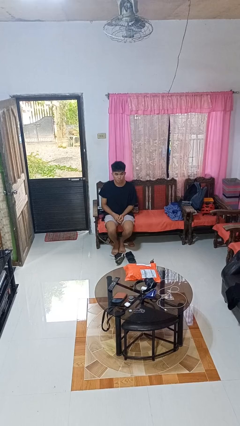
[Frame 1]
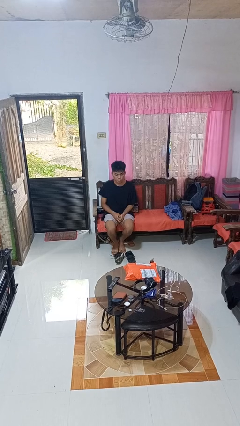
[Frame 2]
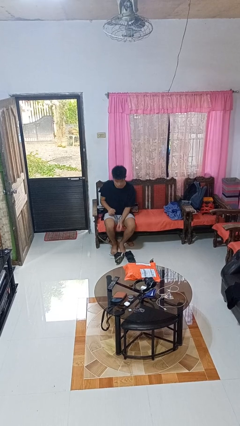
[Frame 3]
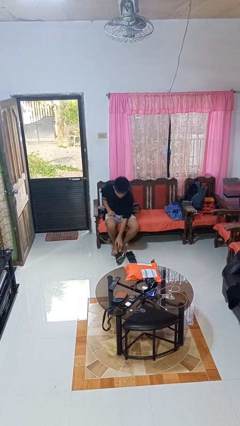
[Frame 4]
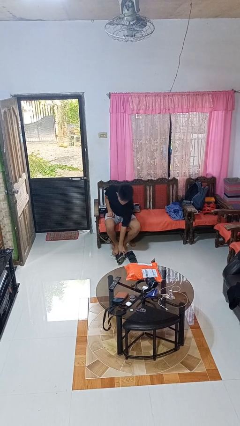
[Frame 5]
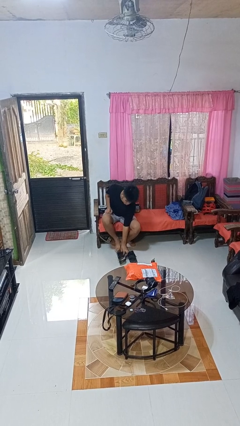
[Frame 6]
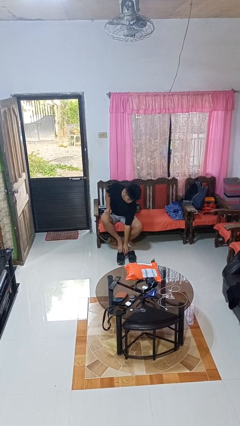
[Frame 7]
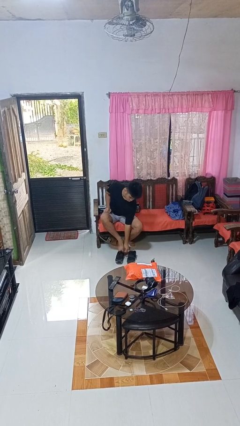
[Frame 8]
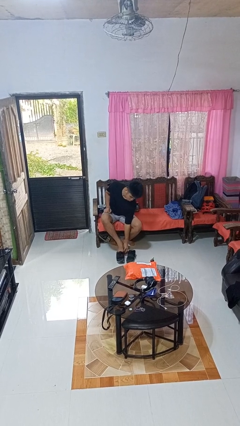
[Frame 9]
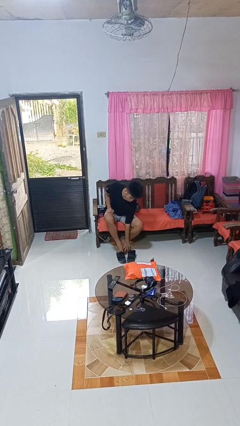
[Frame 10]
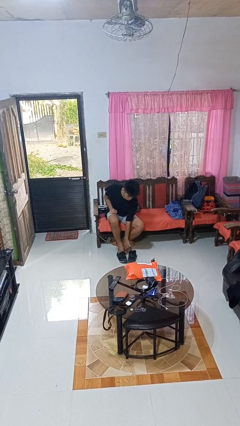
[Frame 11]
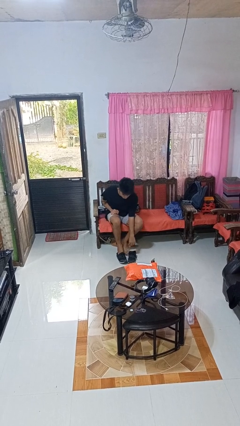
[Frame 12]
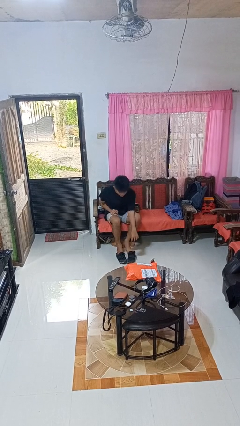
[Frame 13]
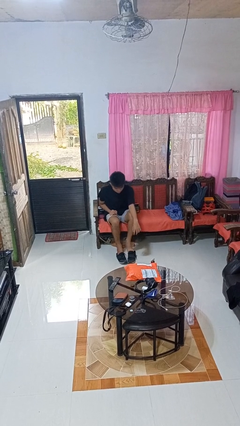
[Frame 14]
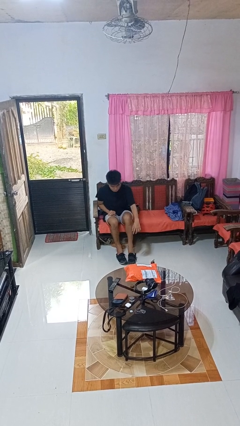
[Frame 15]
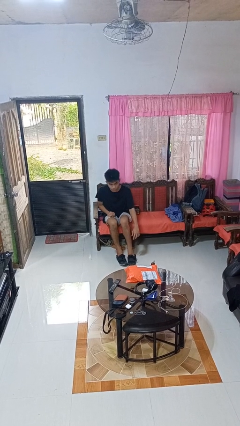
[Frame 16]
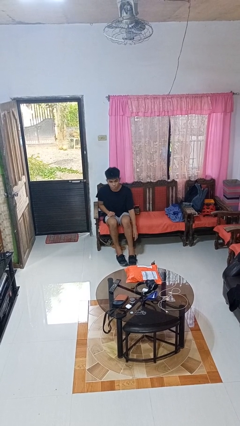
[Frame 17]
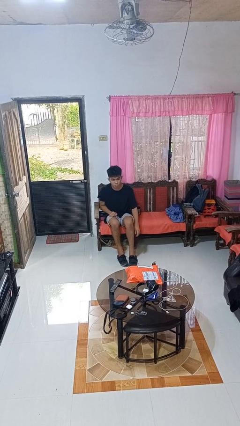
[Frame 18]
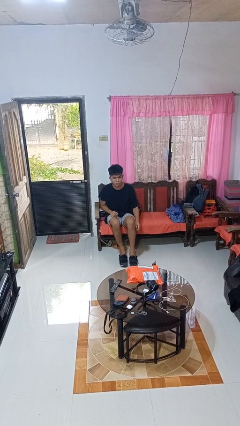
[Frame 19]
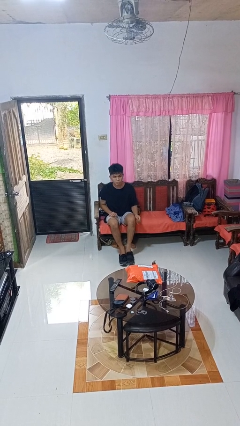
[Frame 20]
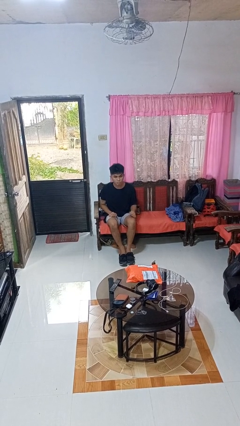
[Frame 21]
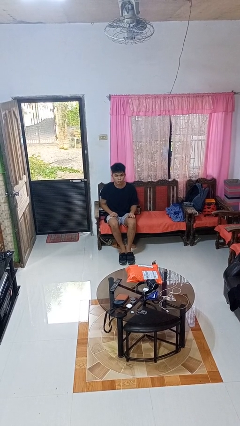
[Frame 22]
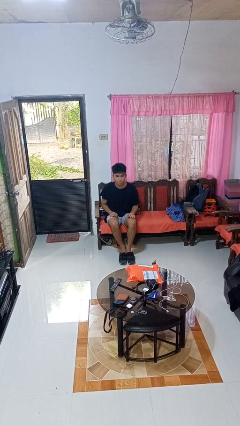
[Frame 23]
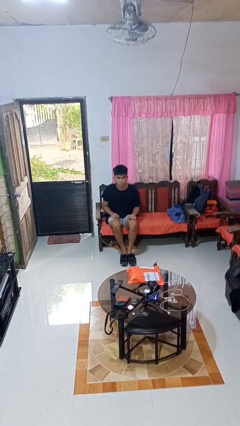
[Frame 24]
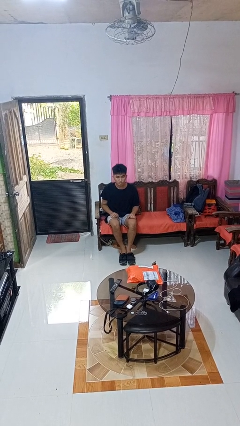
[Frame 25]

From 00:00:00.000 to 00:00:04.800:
person puts on shoes

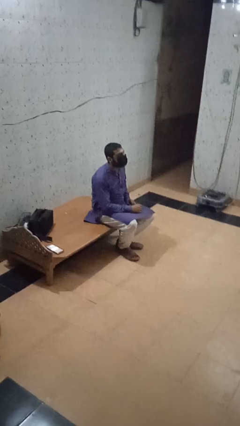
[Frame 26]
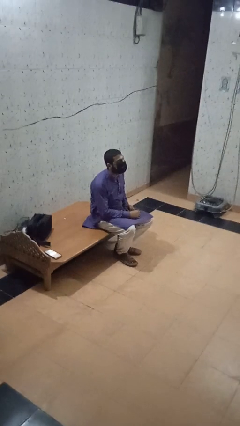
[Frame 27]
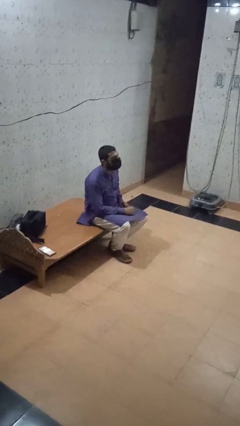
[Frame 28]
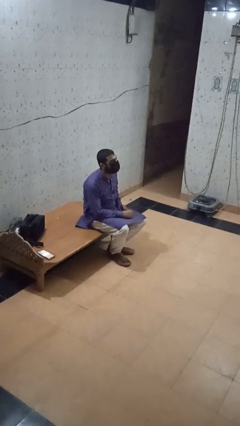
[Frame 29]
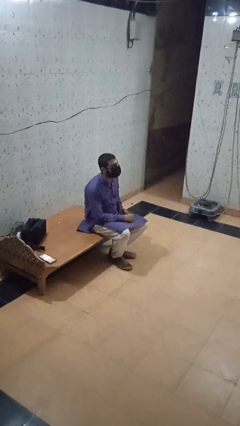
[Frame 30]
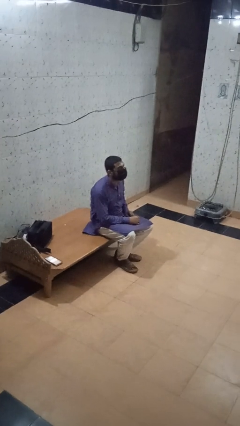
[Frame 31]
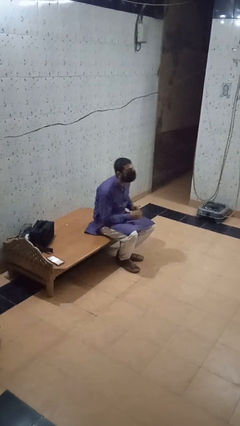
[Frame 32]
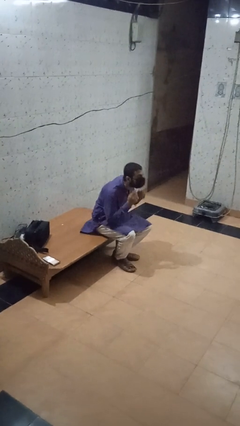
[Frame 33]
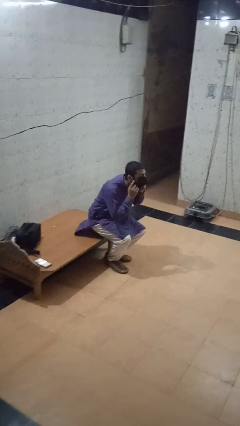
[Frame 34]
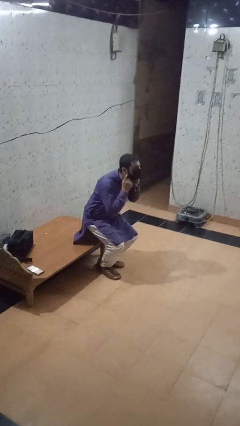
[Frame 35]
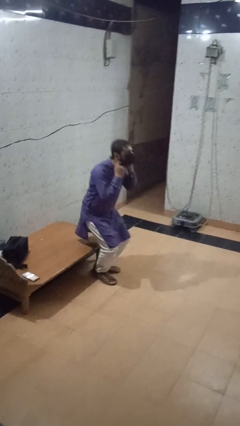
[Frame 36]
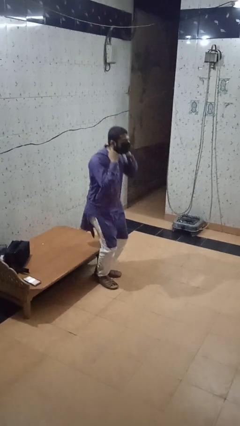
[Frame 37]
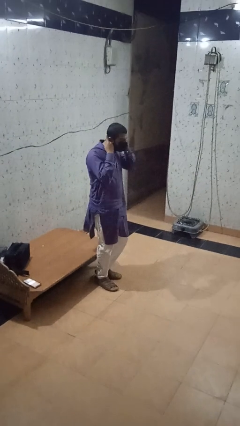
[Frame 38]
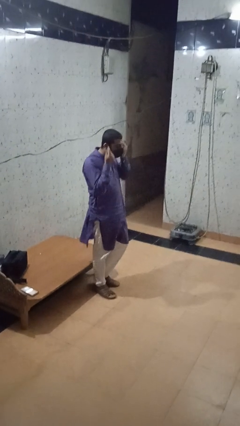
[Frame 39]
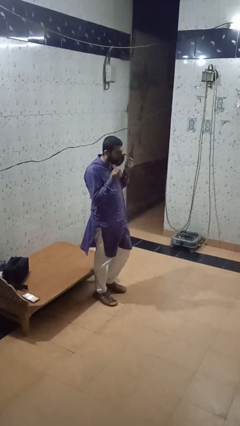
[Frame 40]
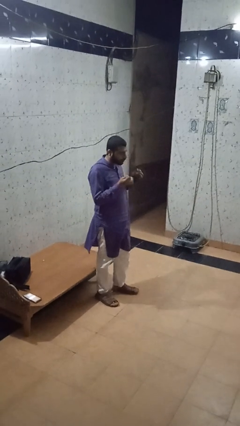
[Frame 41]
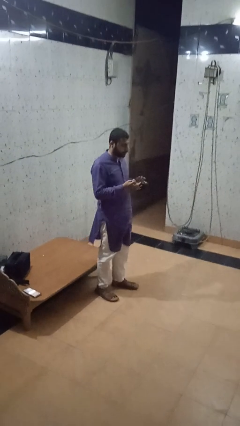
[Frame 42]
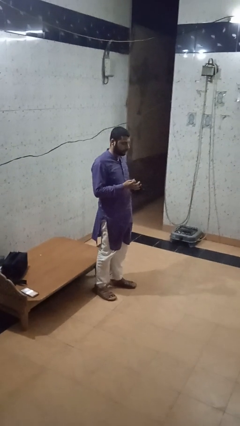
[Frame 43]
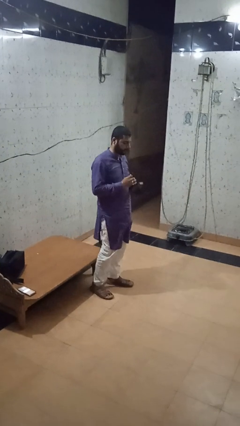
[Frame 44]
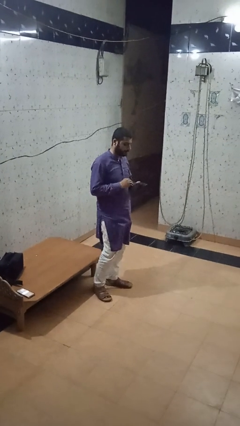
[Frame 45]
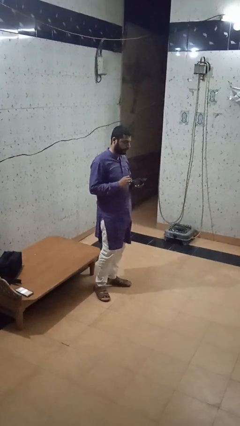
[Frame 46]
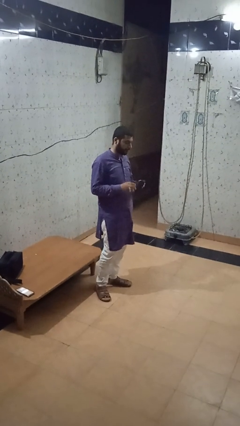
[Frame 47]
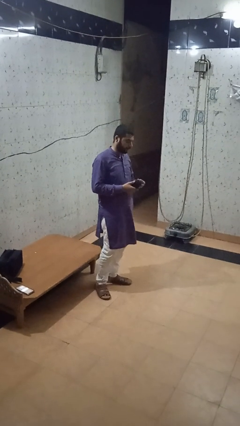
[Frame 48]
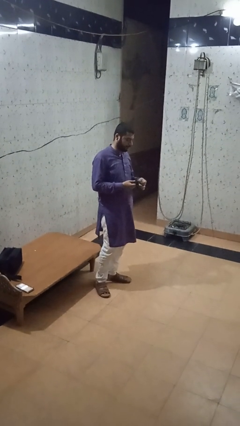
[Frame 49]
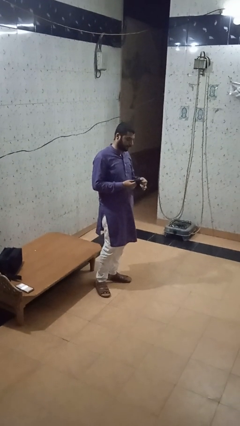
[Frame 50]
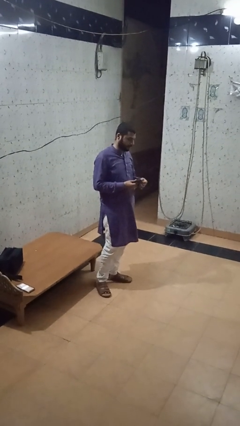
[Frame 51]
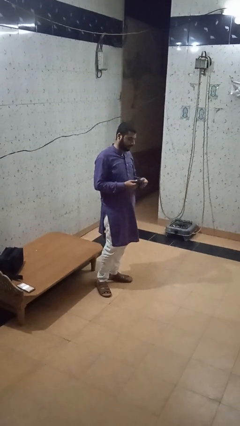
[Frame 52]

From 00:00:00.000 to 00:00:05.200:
person takes off facemask

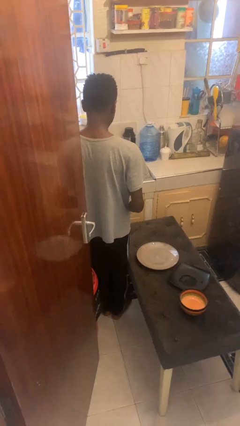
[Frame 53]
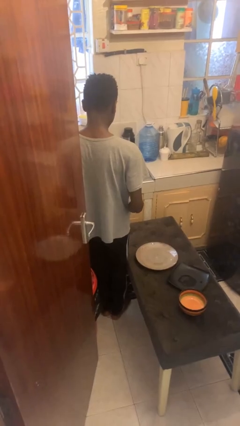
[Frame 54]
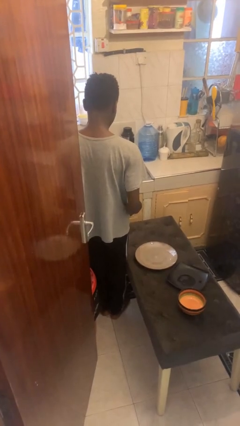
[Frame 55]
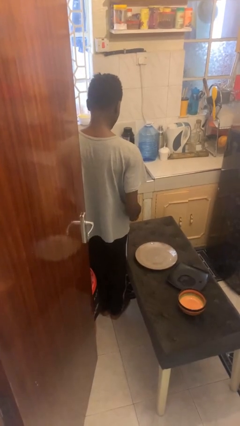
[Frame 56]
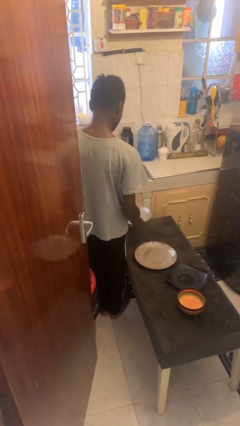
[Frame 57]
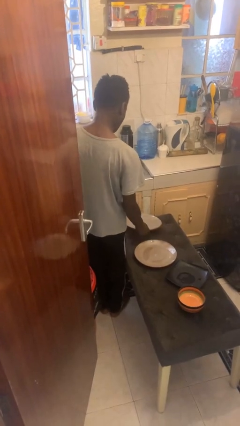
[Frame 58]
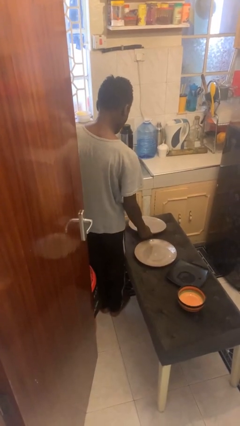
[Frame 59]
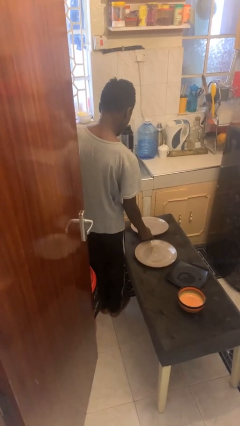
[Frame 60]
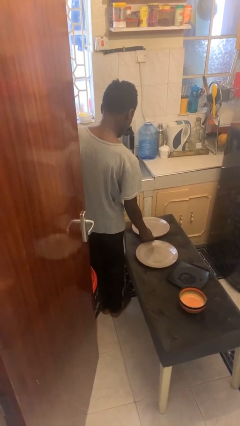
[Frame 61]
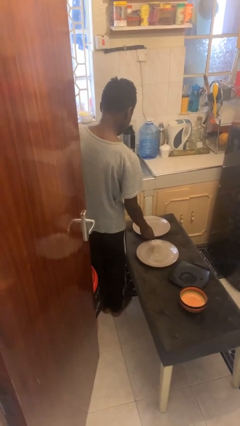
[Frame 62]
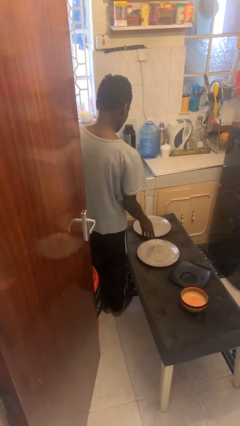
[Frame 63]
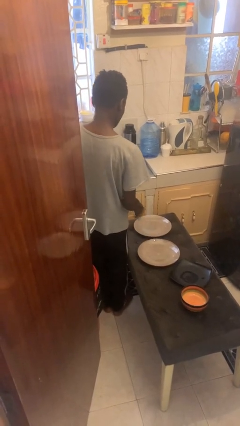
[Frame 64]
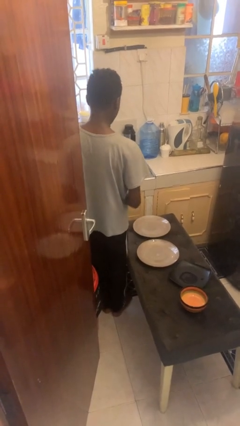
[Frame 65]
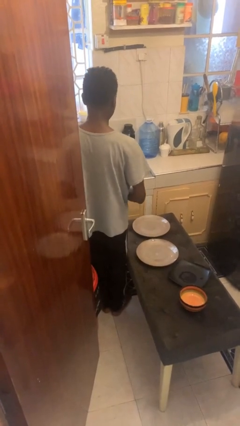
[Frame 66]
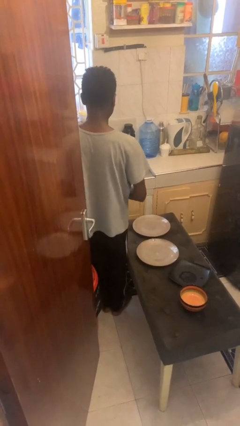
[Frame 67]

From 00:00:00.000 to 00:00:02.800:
person sets table

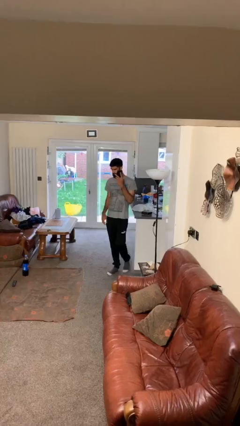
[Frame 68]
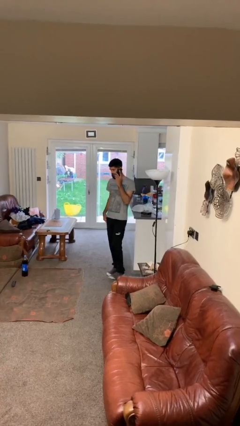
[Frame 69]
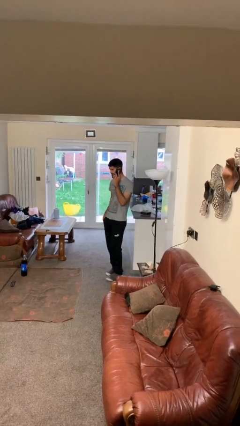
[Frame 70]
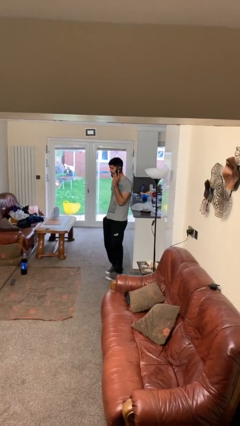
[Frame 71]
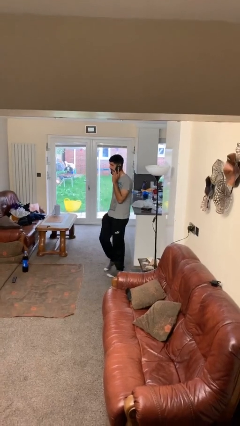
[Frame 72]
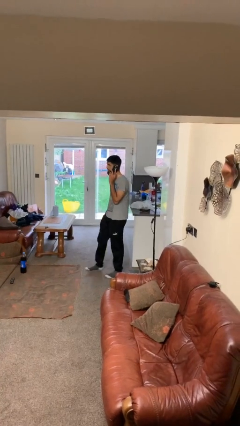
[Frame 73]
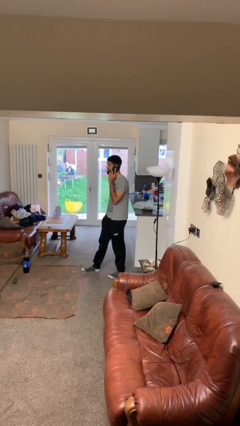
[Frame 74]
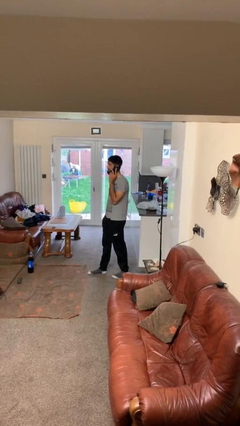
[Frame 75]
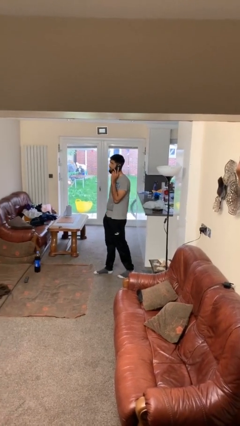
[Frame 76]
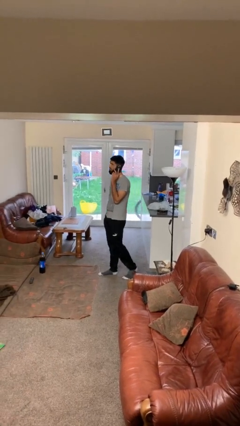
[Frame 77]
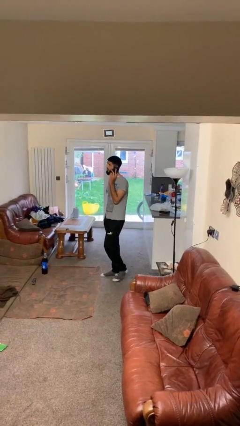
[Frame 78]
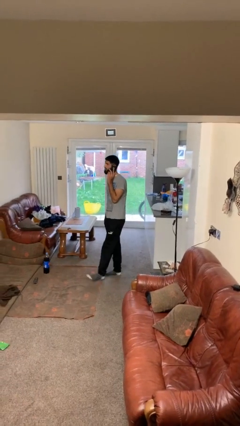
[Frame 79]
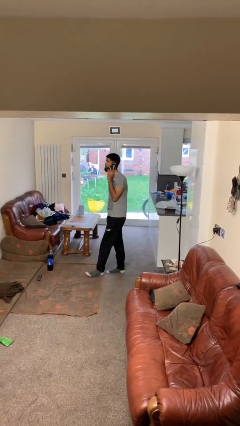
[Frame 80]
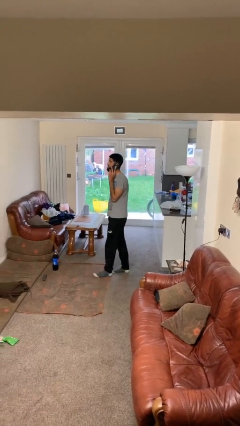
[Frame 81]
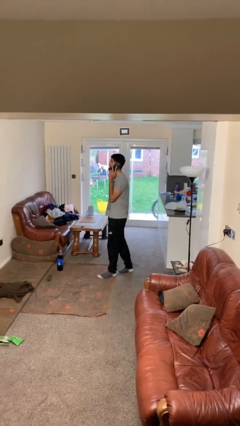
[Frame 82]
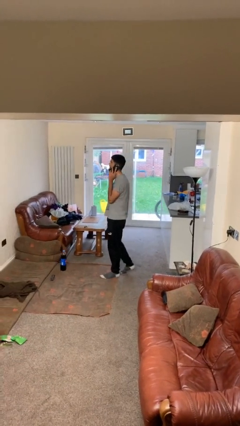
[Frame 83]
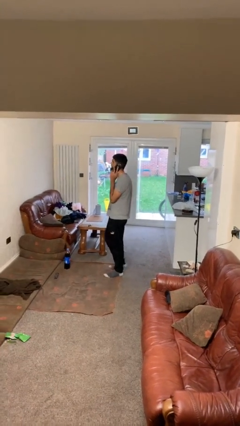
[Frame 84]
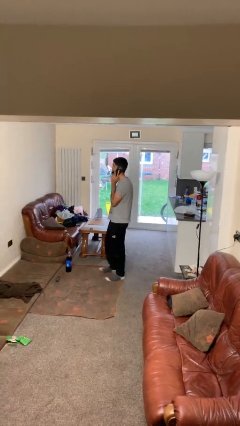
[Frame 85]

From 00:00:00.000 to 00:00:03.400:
person talks on phone

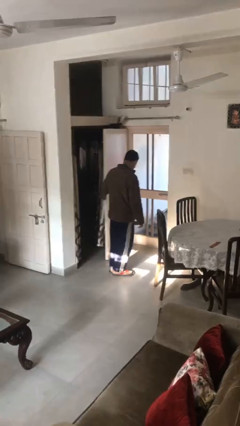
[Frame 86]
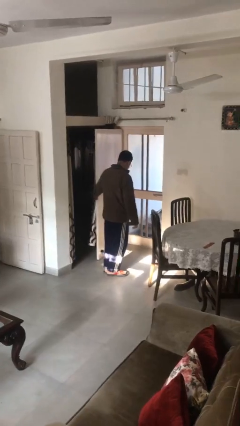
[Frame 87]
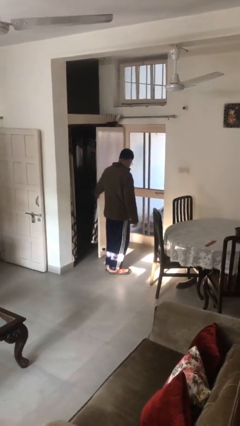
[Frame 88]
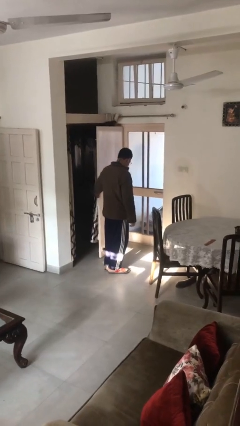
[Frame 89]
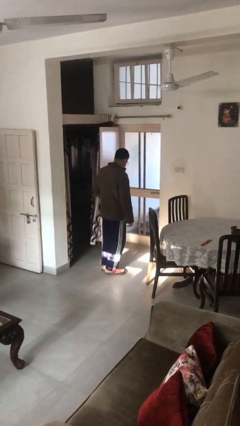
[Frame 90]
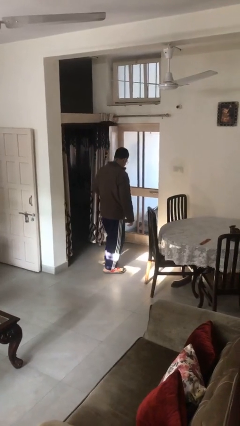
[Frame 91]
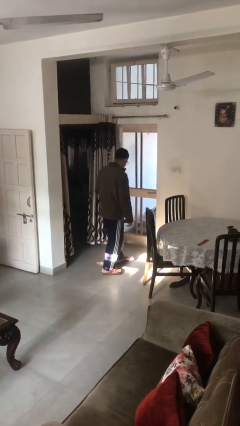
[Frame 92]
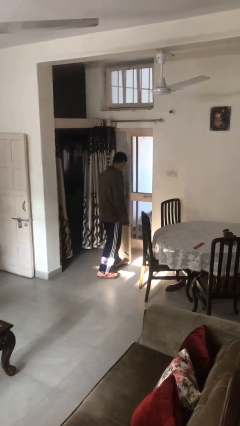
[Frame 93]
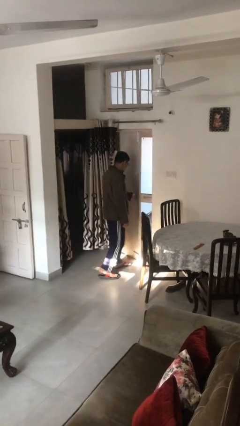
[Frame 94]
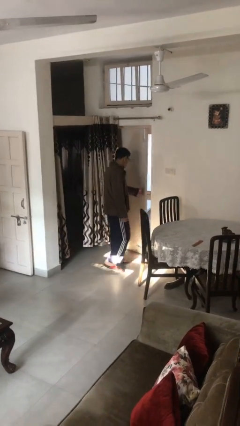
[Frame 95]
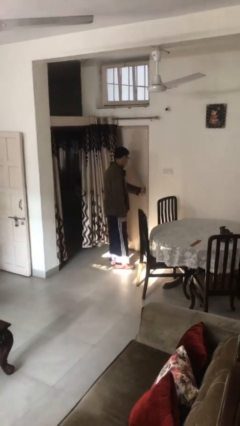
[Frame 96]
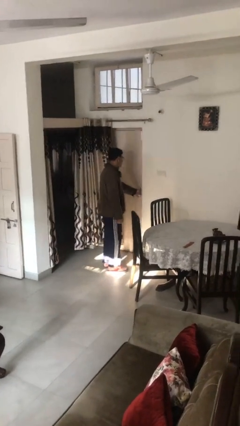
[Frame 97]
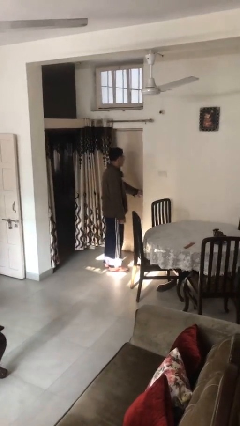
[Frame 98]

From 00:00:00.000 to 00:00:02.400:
person closes facility door
